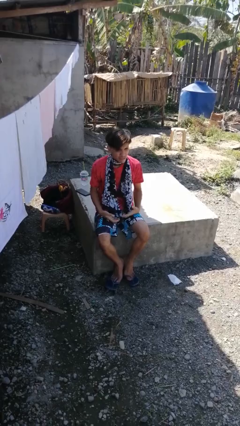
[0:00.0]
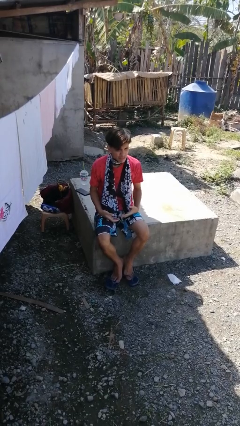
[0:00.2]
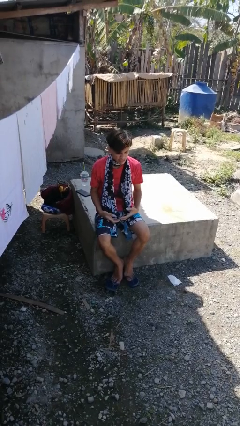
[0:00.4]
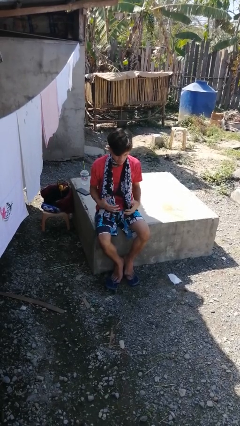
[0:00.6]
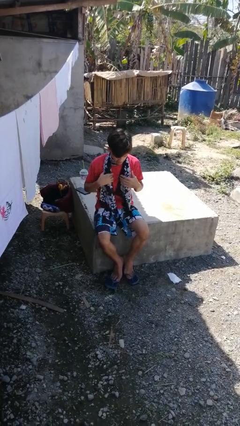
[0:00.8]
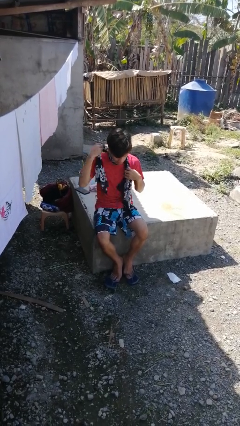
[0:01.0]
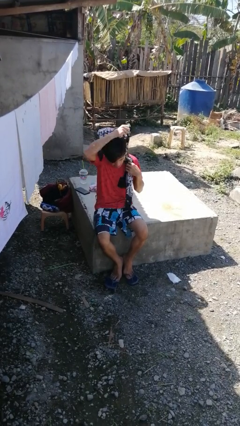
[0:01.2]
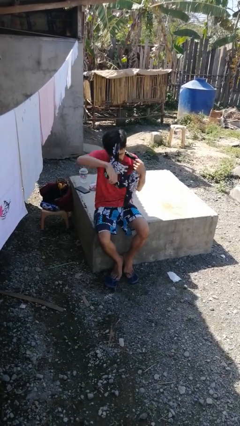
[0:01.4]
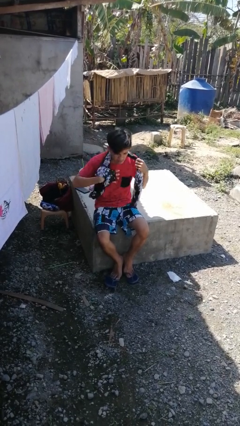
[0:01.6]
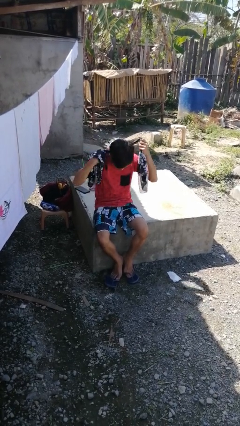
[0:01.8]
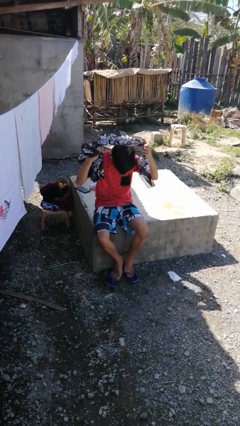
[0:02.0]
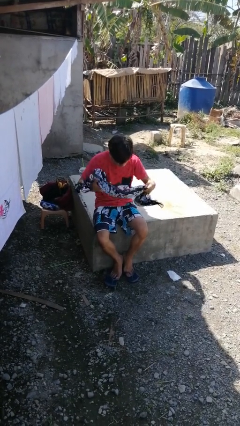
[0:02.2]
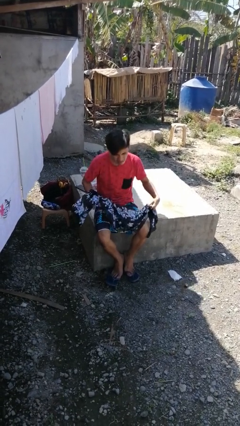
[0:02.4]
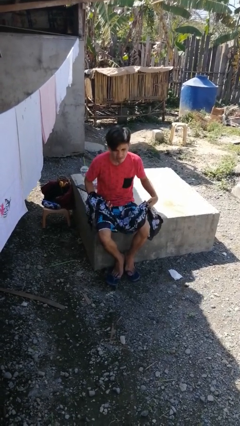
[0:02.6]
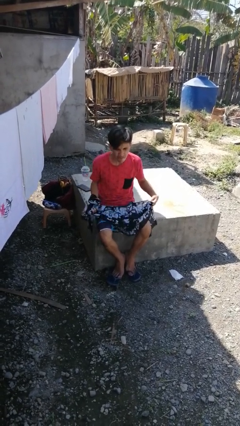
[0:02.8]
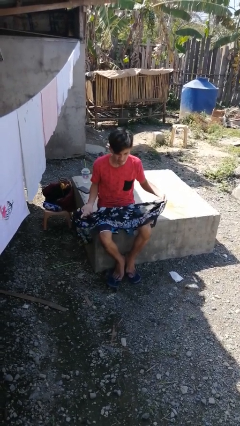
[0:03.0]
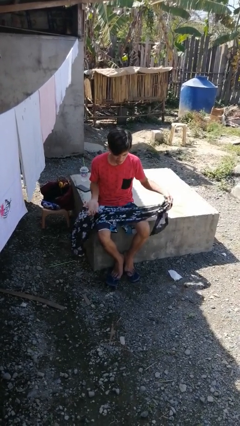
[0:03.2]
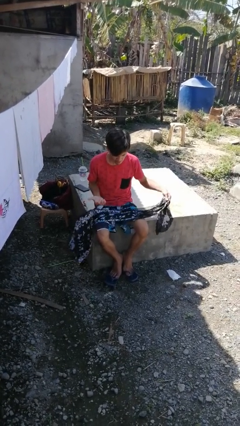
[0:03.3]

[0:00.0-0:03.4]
person takes off scarf

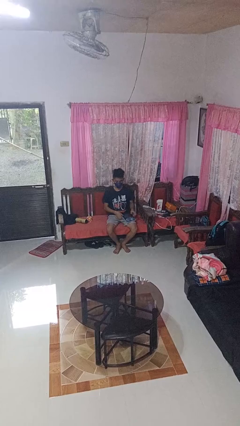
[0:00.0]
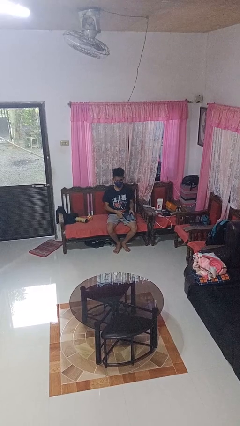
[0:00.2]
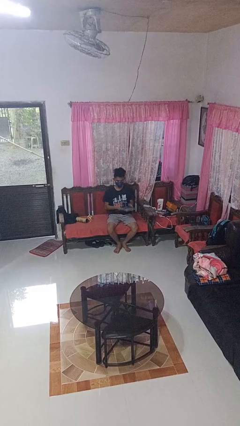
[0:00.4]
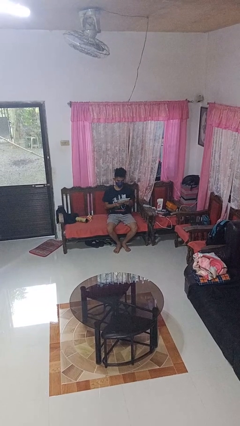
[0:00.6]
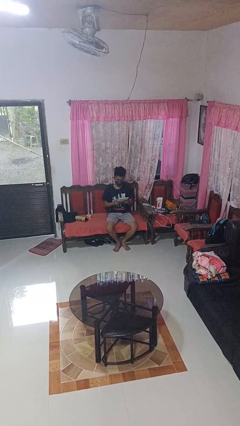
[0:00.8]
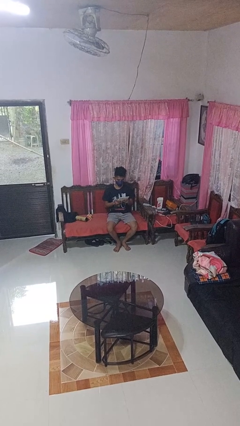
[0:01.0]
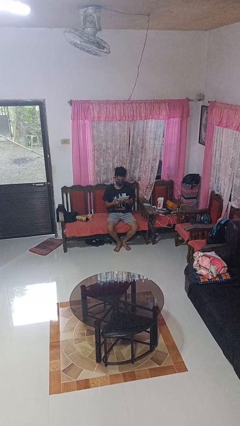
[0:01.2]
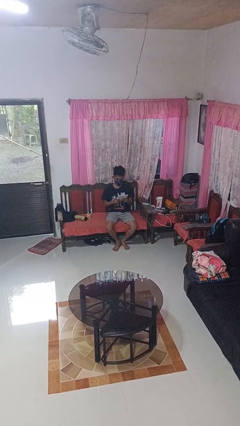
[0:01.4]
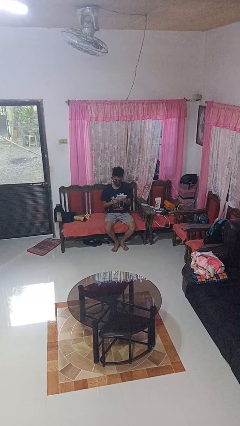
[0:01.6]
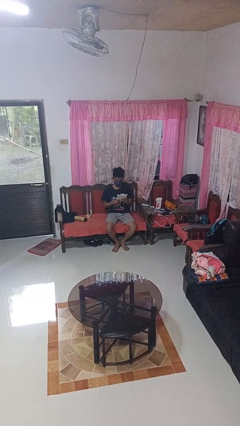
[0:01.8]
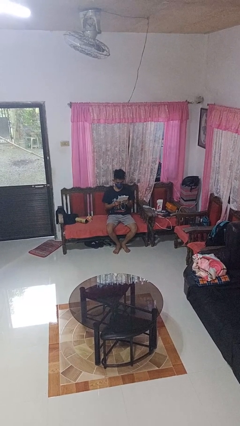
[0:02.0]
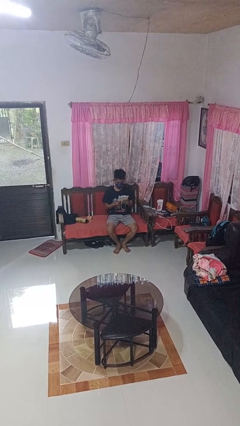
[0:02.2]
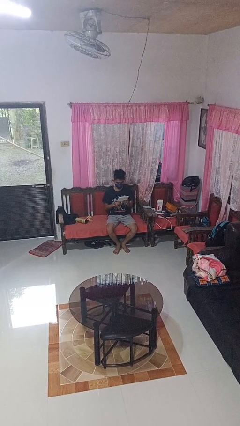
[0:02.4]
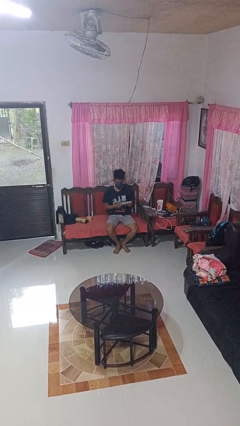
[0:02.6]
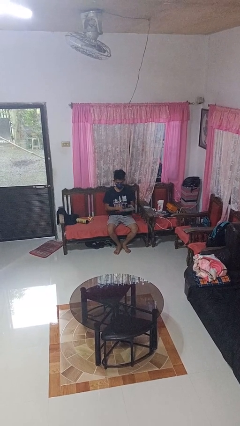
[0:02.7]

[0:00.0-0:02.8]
person interacts with tablet

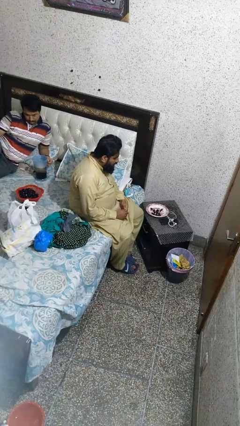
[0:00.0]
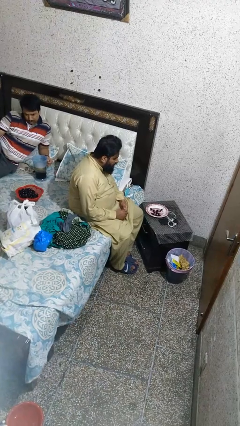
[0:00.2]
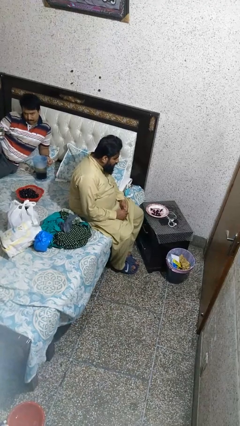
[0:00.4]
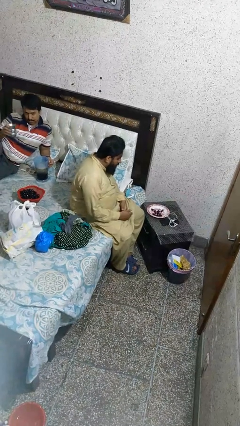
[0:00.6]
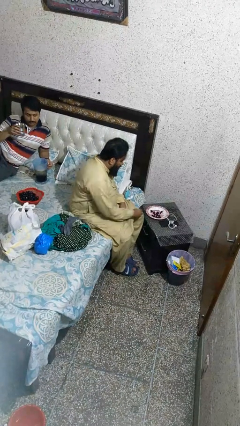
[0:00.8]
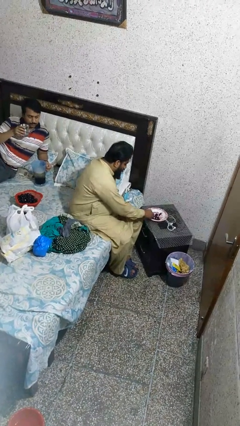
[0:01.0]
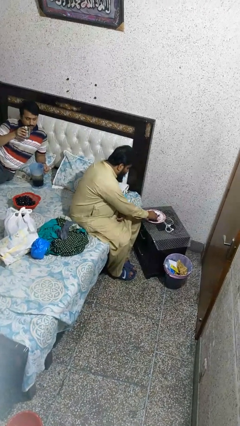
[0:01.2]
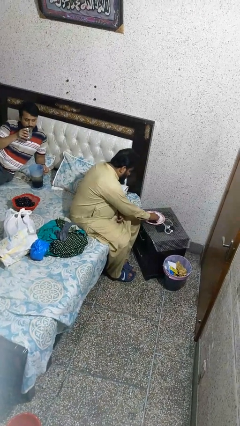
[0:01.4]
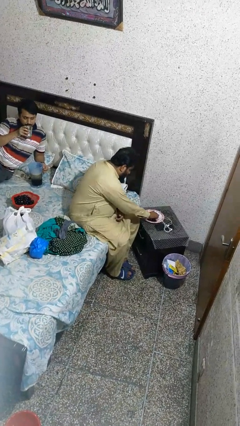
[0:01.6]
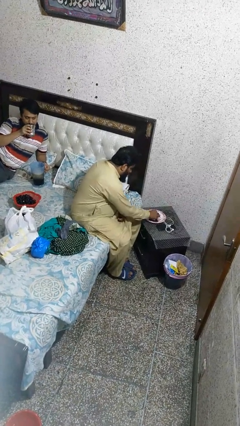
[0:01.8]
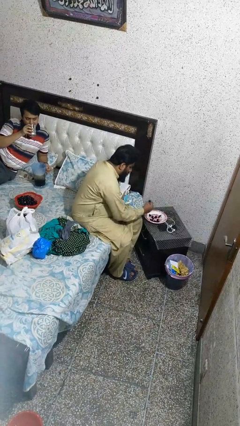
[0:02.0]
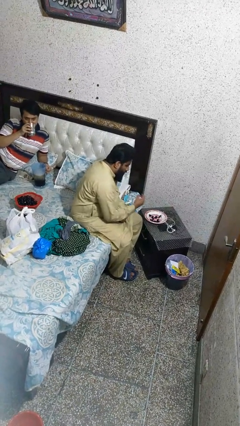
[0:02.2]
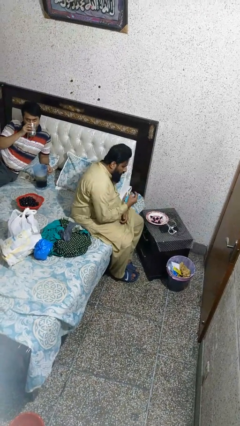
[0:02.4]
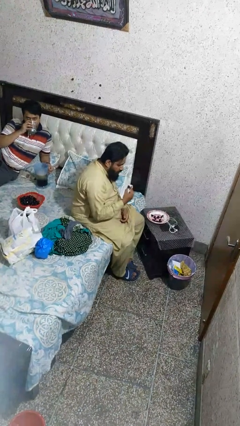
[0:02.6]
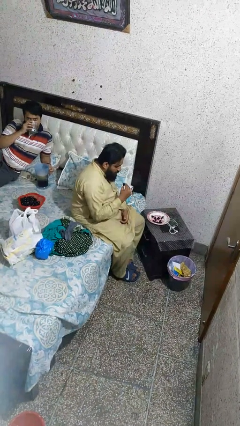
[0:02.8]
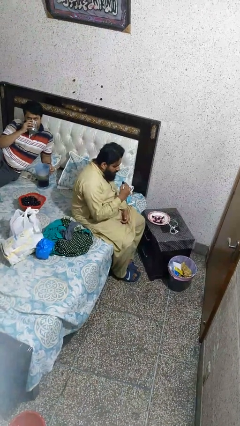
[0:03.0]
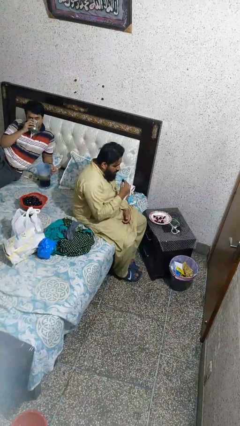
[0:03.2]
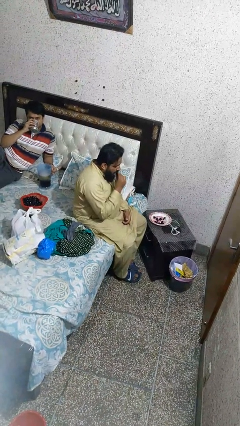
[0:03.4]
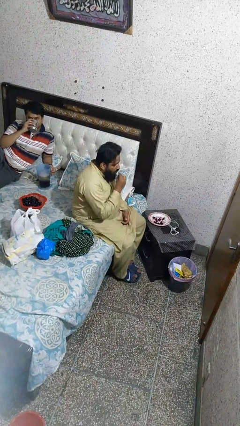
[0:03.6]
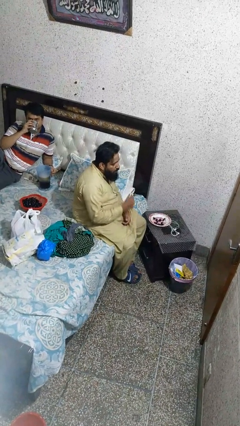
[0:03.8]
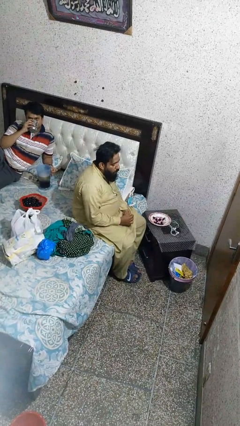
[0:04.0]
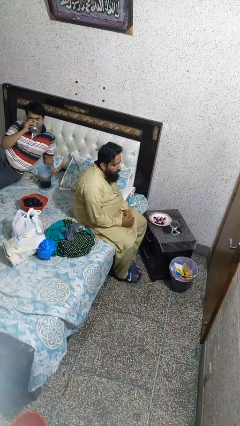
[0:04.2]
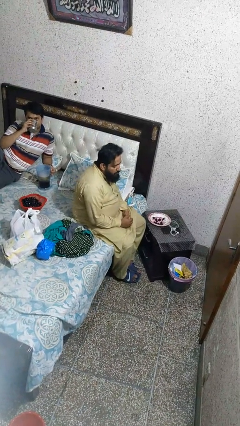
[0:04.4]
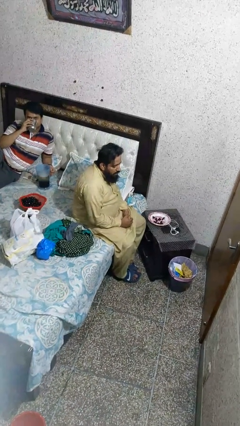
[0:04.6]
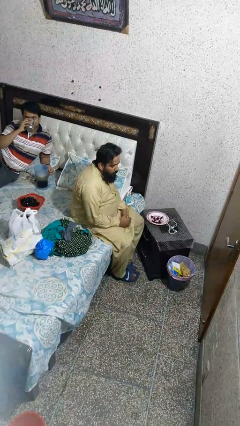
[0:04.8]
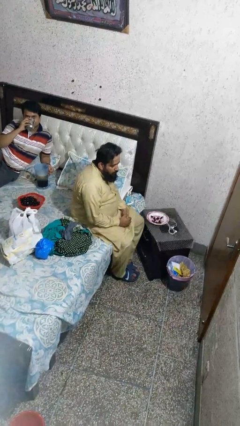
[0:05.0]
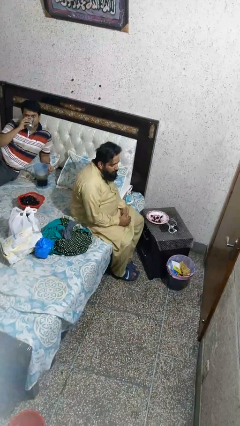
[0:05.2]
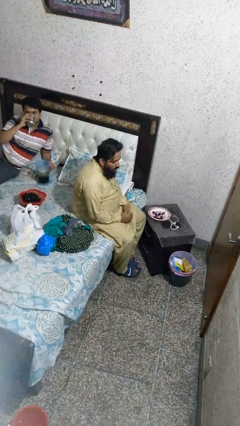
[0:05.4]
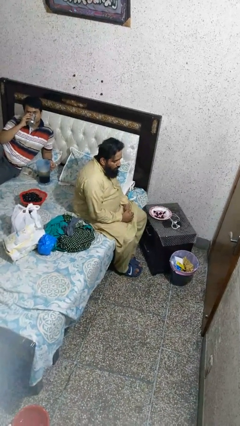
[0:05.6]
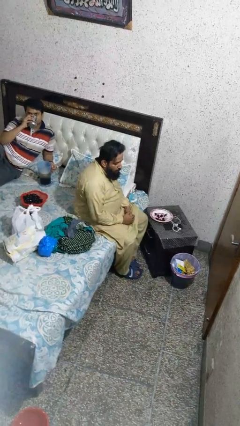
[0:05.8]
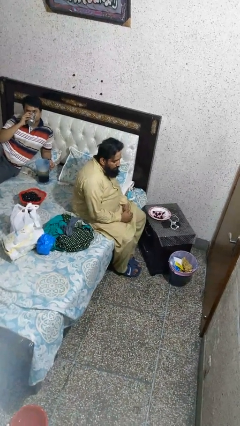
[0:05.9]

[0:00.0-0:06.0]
person eats with hands

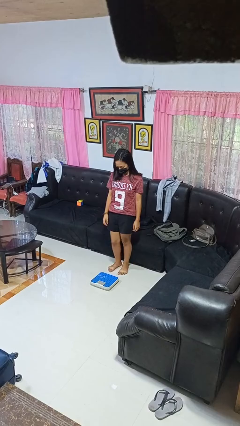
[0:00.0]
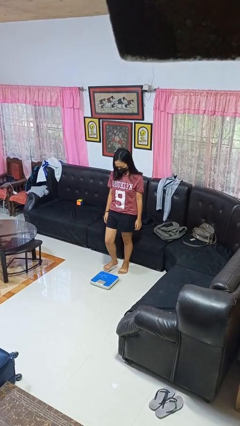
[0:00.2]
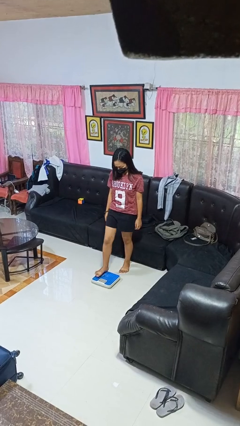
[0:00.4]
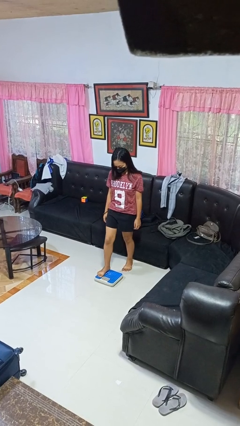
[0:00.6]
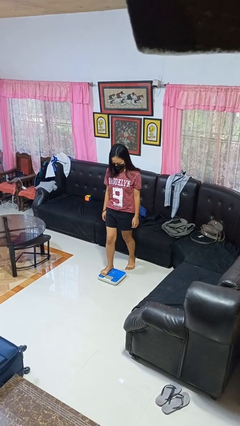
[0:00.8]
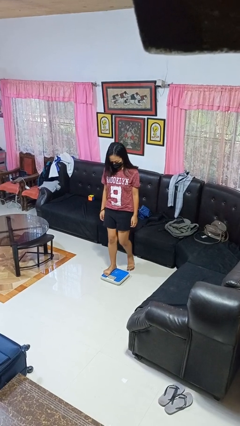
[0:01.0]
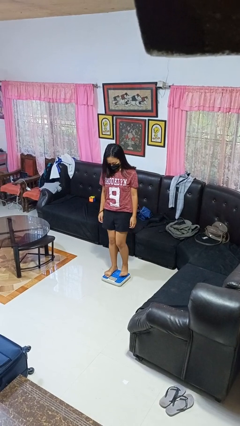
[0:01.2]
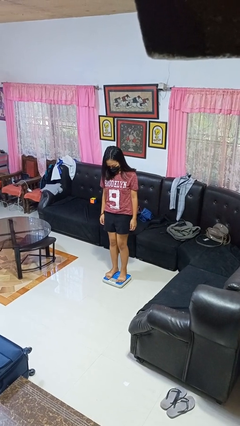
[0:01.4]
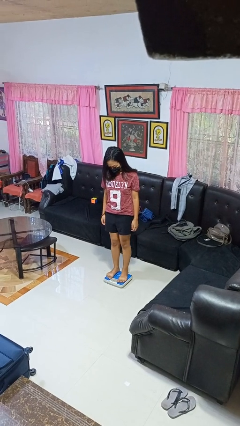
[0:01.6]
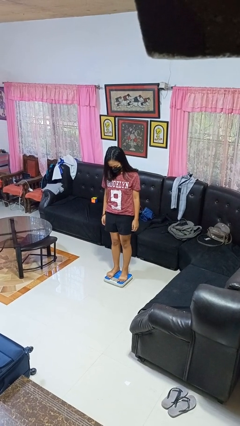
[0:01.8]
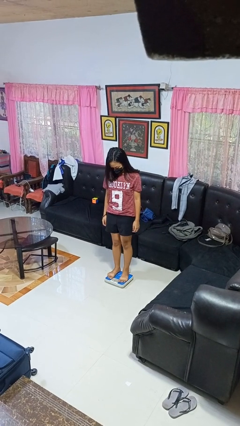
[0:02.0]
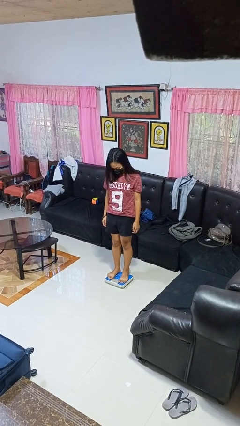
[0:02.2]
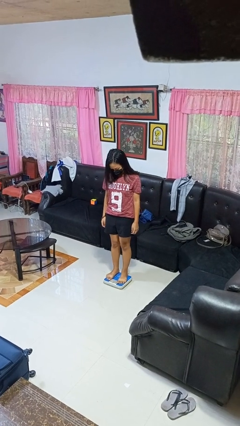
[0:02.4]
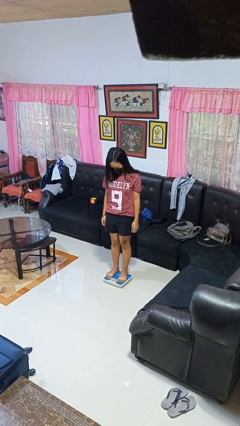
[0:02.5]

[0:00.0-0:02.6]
person uses bodyweight scale

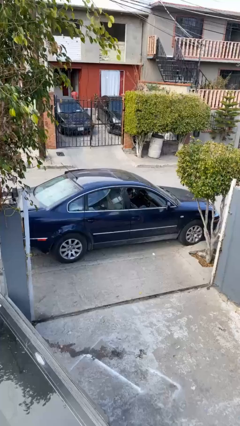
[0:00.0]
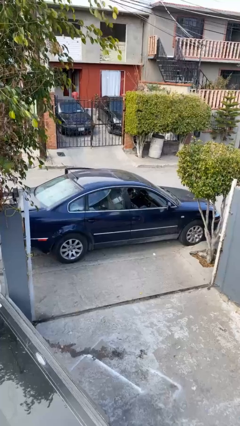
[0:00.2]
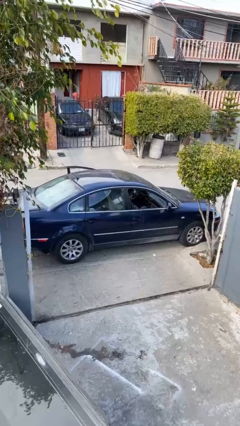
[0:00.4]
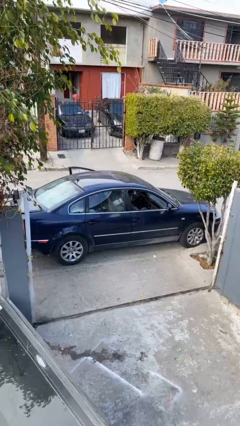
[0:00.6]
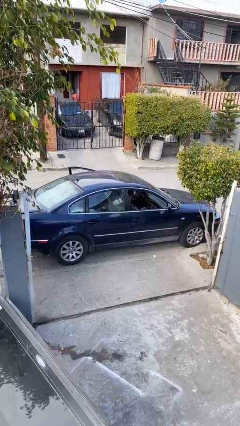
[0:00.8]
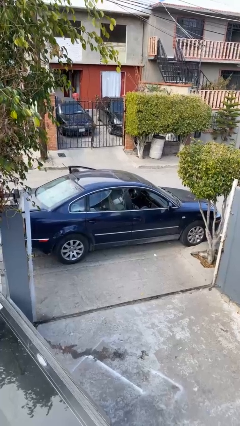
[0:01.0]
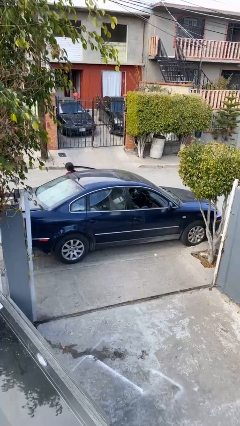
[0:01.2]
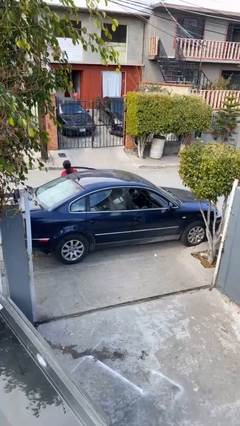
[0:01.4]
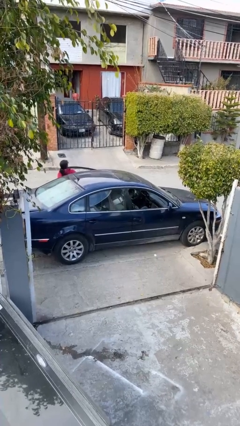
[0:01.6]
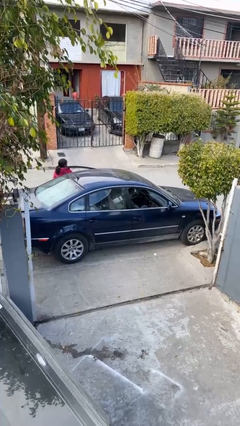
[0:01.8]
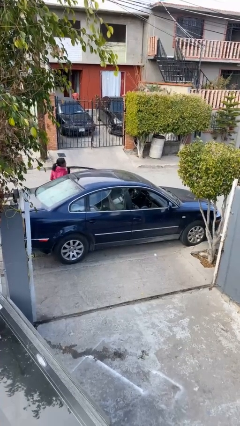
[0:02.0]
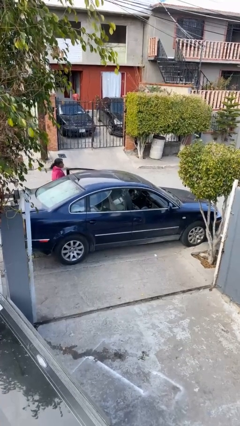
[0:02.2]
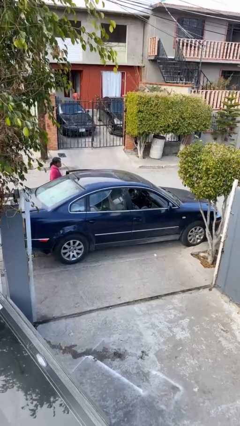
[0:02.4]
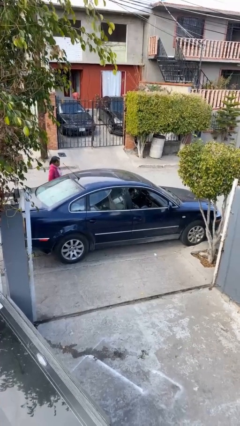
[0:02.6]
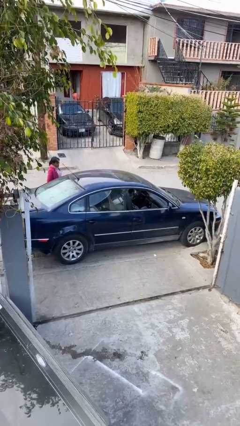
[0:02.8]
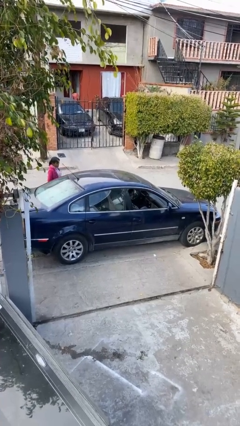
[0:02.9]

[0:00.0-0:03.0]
car drops off person
